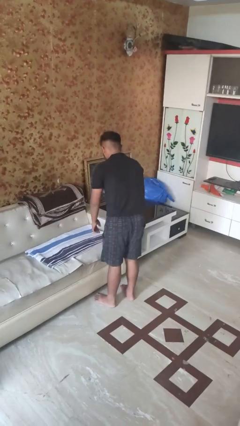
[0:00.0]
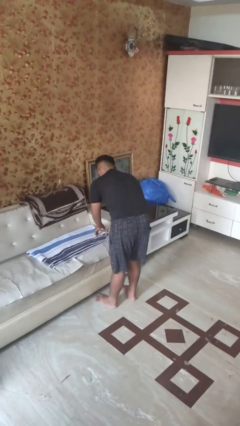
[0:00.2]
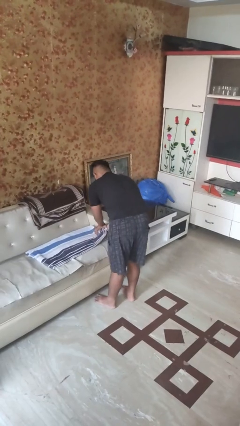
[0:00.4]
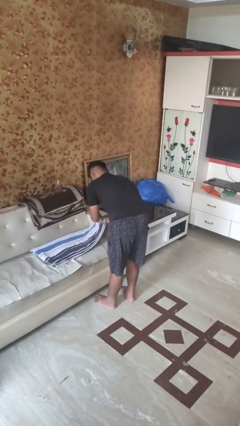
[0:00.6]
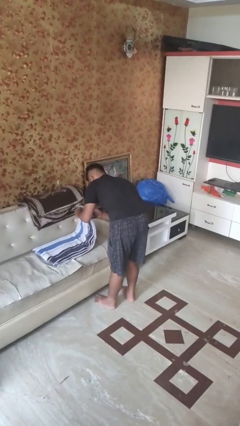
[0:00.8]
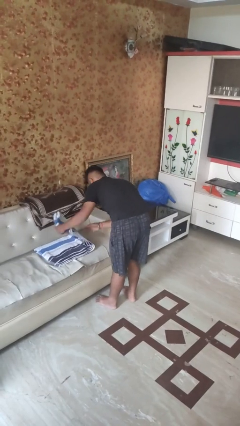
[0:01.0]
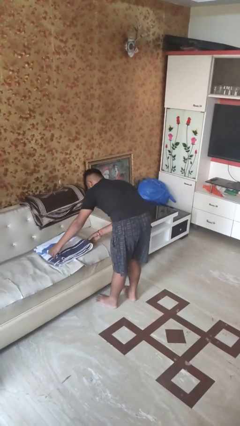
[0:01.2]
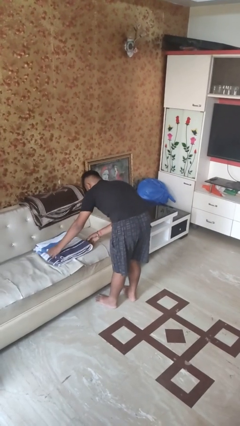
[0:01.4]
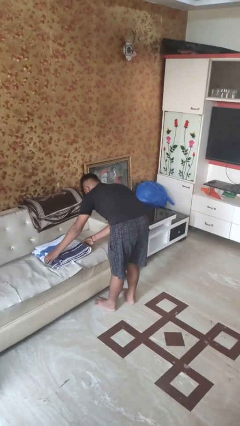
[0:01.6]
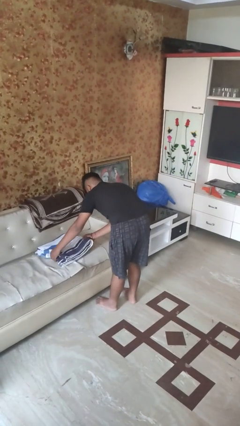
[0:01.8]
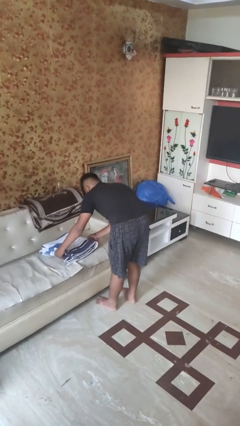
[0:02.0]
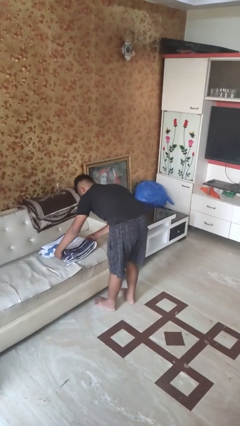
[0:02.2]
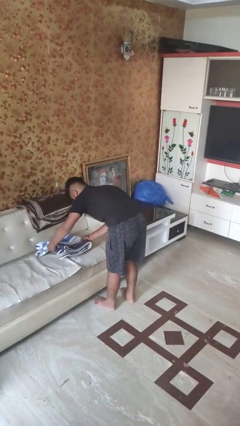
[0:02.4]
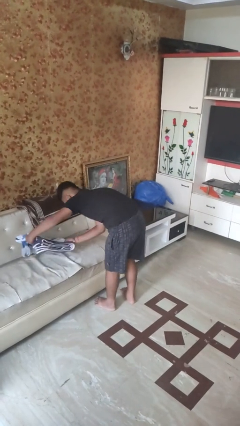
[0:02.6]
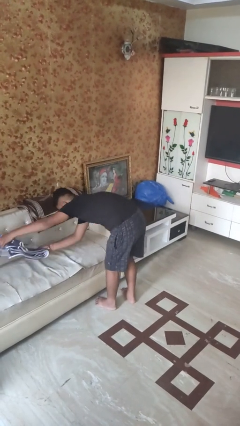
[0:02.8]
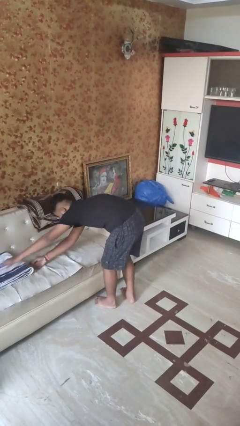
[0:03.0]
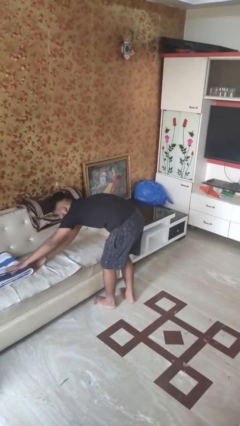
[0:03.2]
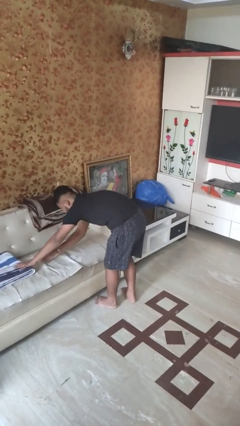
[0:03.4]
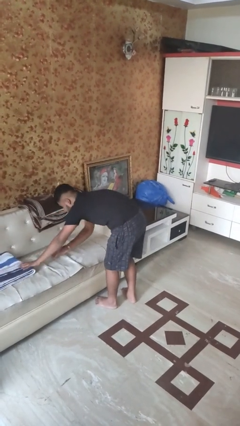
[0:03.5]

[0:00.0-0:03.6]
person folds towel

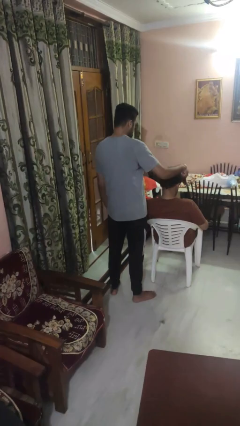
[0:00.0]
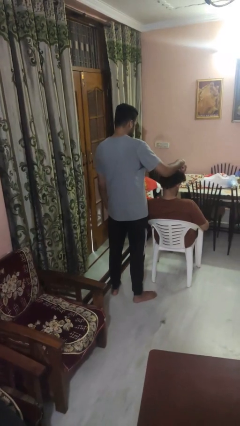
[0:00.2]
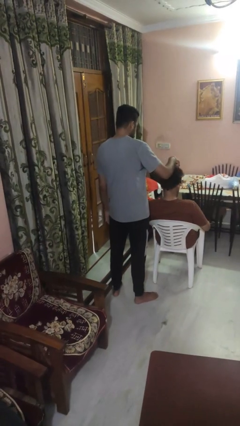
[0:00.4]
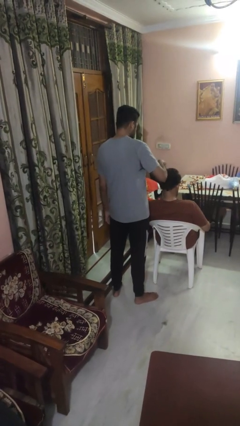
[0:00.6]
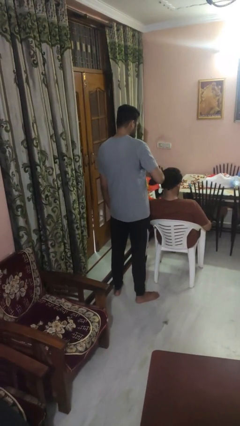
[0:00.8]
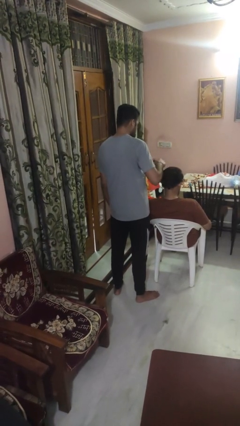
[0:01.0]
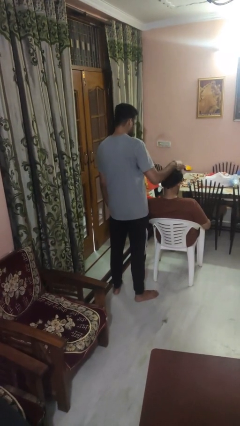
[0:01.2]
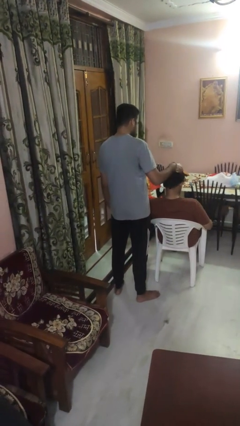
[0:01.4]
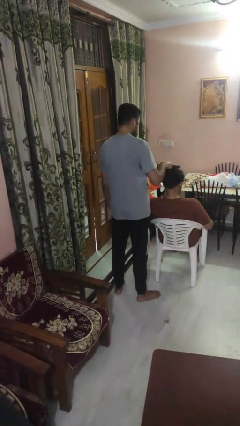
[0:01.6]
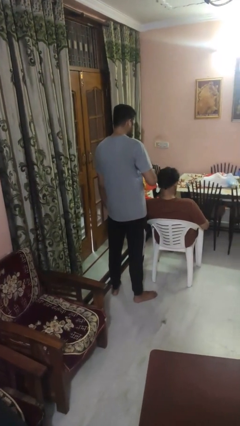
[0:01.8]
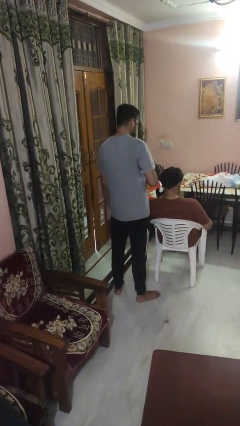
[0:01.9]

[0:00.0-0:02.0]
person brushes hair of person

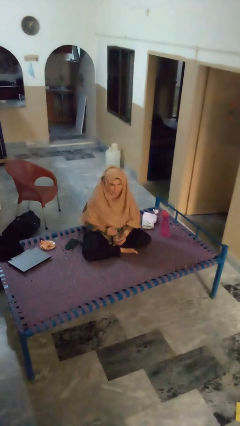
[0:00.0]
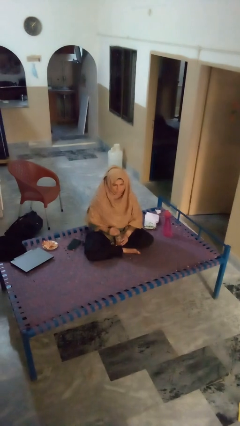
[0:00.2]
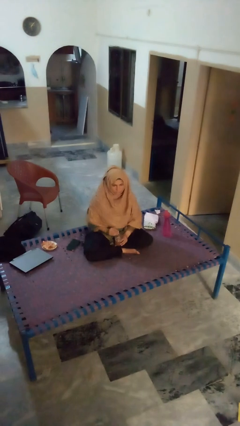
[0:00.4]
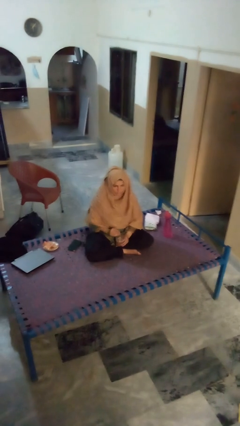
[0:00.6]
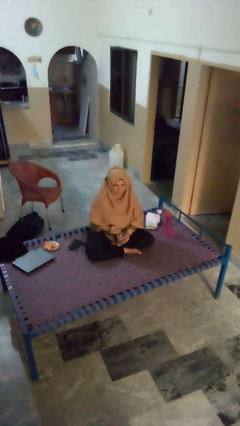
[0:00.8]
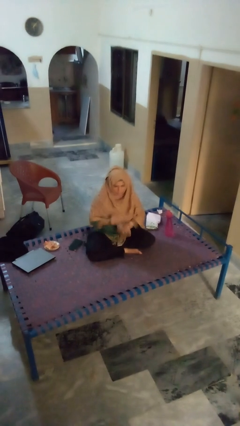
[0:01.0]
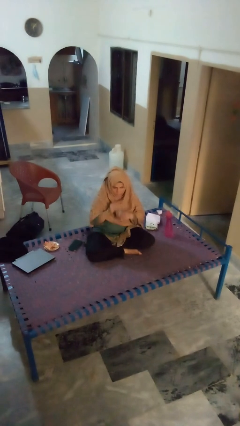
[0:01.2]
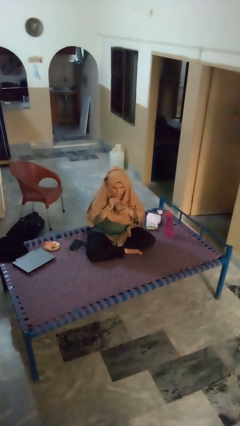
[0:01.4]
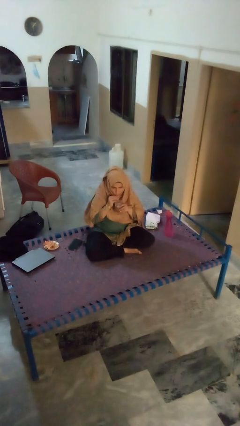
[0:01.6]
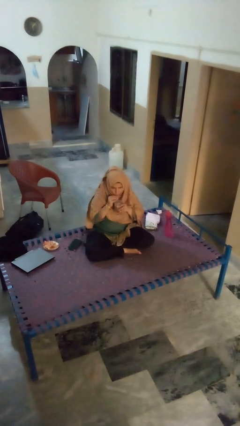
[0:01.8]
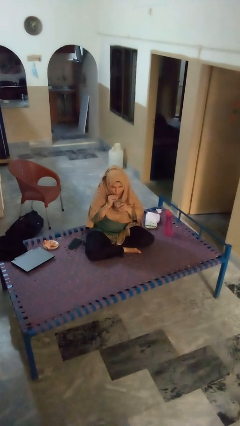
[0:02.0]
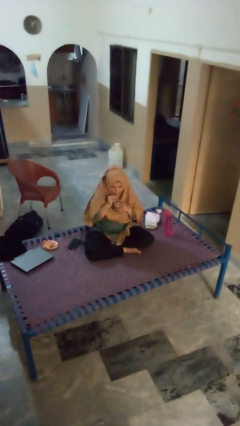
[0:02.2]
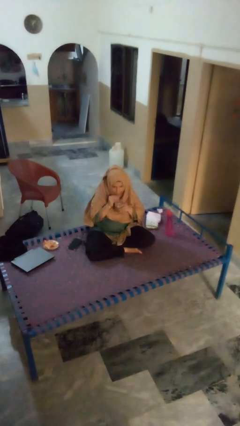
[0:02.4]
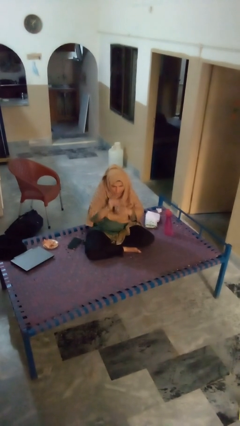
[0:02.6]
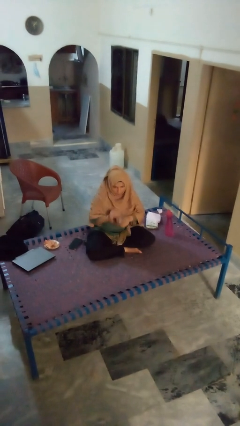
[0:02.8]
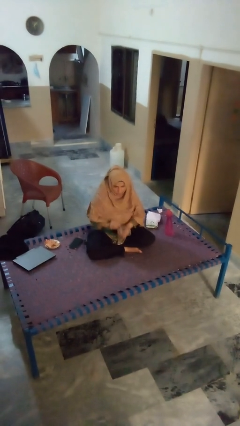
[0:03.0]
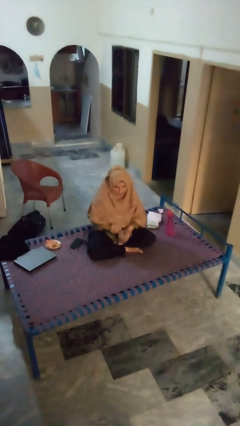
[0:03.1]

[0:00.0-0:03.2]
person drinks from straw

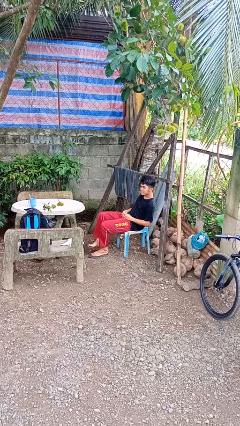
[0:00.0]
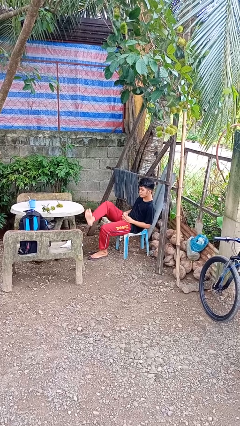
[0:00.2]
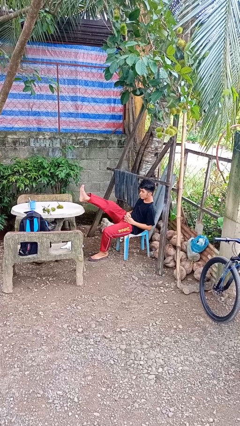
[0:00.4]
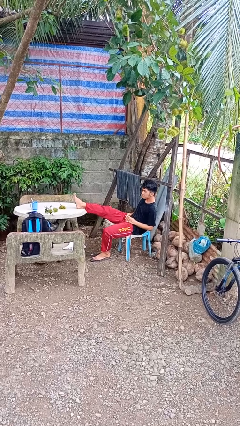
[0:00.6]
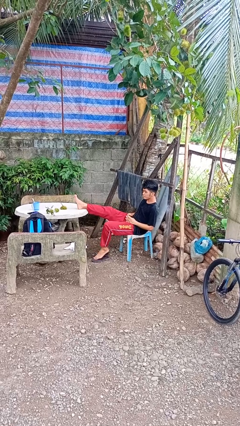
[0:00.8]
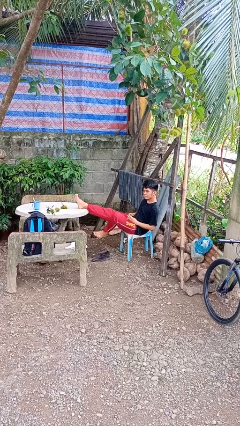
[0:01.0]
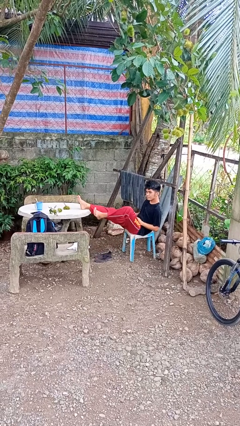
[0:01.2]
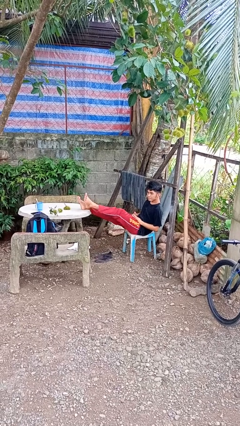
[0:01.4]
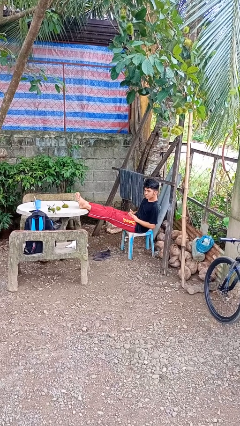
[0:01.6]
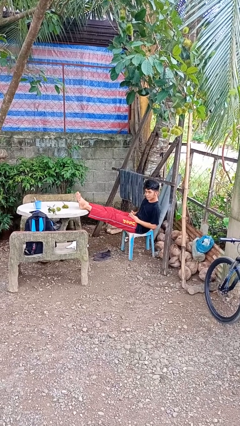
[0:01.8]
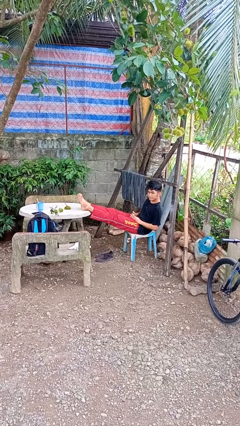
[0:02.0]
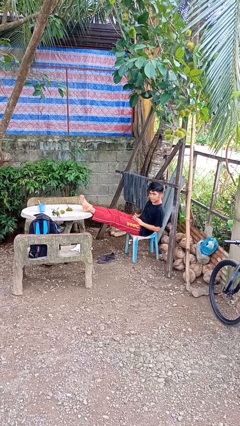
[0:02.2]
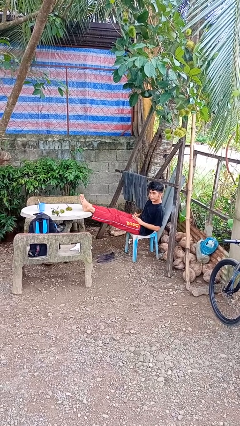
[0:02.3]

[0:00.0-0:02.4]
person puts feet up

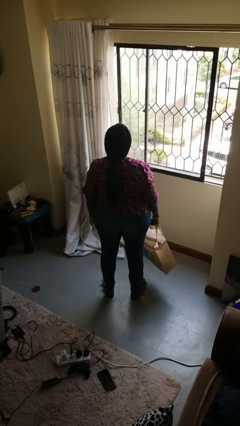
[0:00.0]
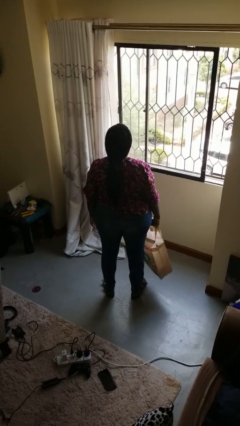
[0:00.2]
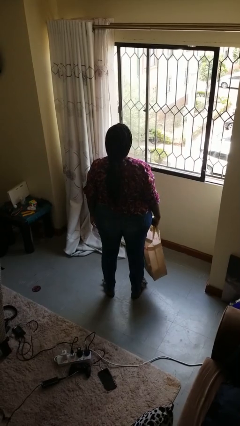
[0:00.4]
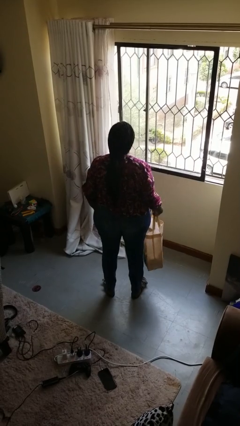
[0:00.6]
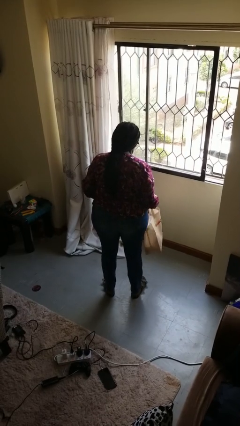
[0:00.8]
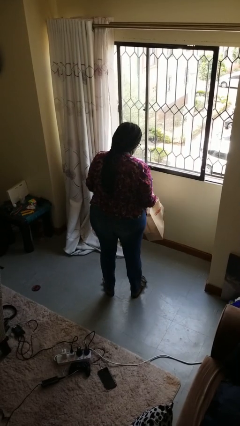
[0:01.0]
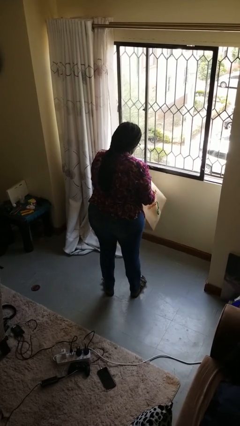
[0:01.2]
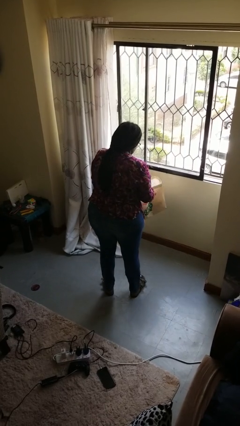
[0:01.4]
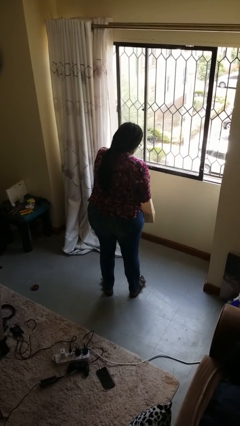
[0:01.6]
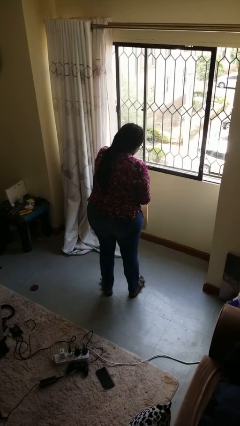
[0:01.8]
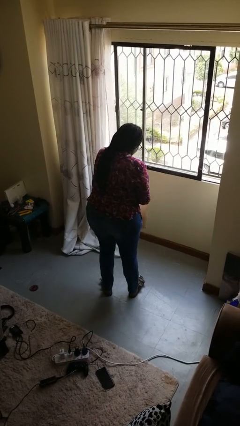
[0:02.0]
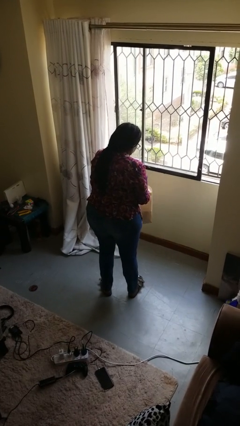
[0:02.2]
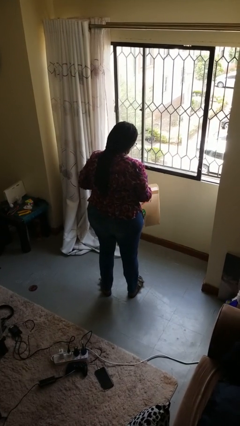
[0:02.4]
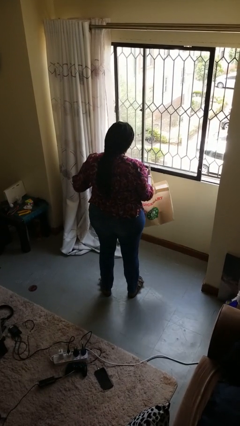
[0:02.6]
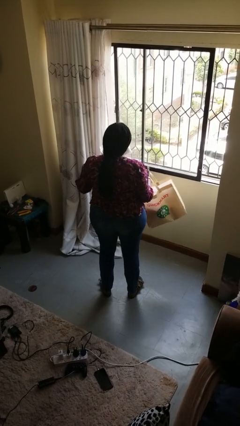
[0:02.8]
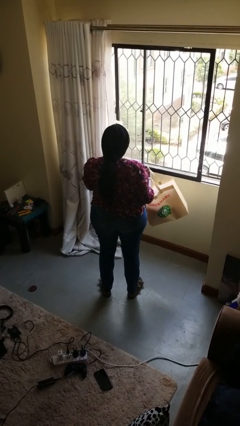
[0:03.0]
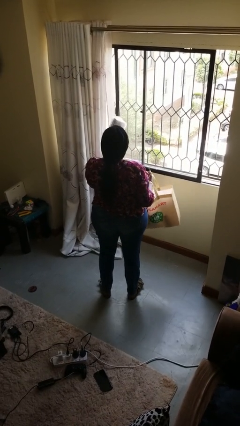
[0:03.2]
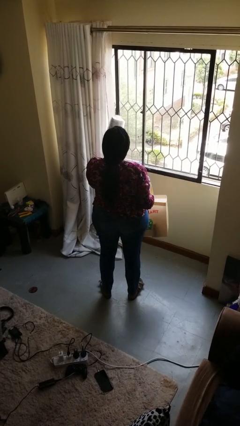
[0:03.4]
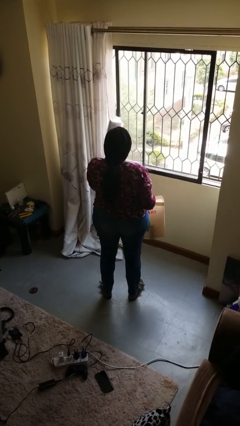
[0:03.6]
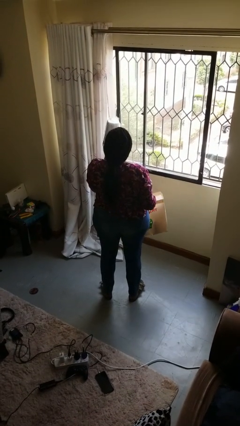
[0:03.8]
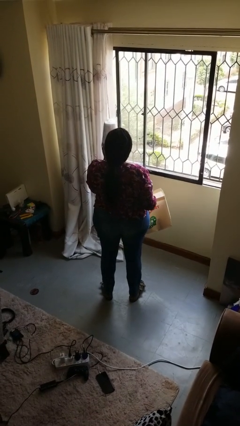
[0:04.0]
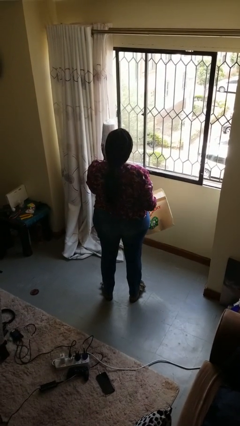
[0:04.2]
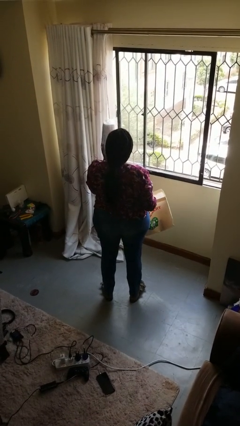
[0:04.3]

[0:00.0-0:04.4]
person takes object from bag

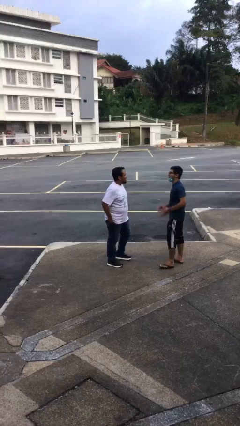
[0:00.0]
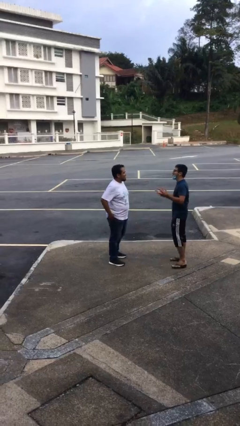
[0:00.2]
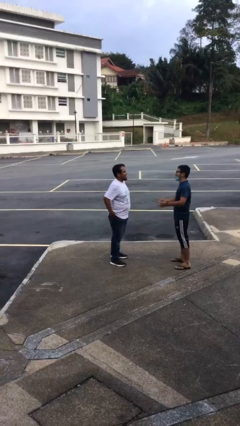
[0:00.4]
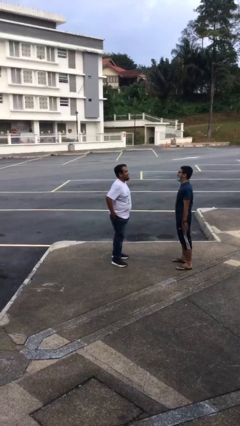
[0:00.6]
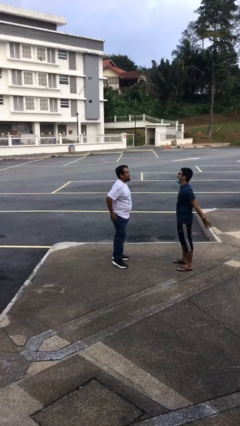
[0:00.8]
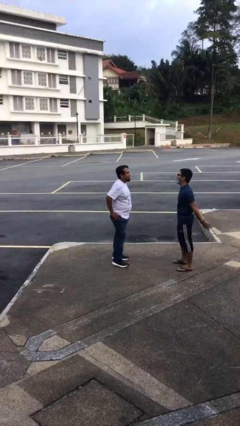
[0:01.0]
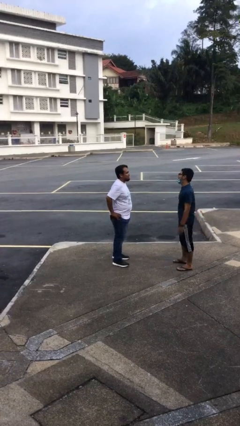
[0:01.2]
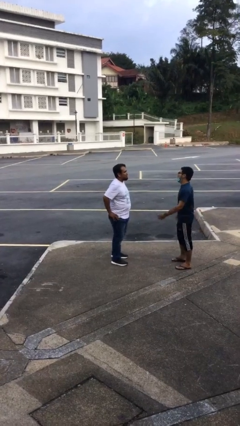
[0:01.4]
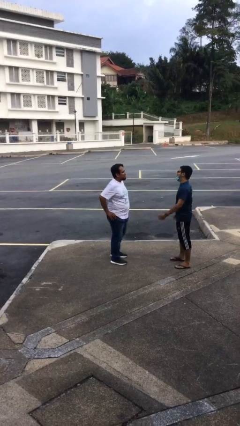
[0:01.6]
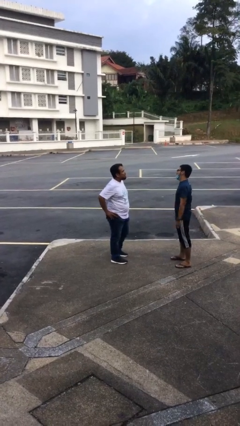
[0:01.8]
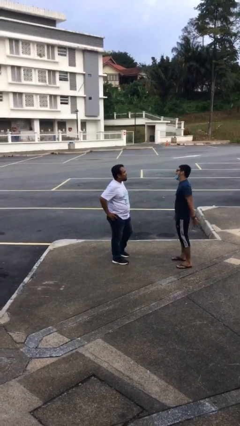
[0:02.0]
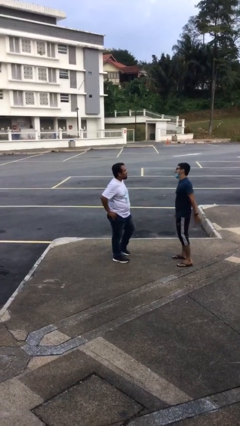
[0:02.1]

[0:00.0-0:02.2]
person talks to person
